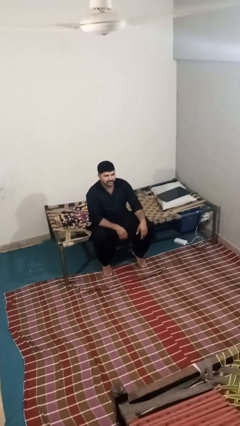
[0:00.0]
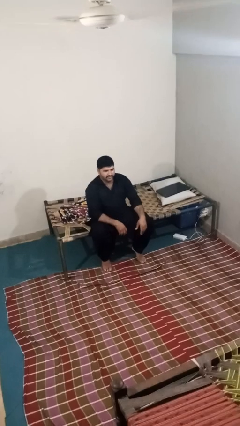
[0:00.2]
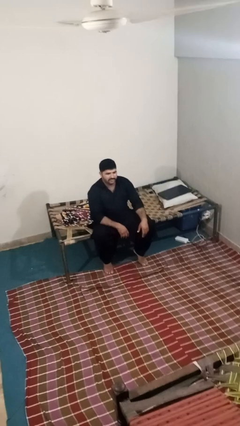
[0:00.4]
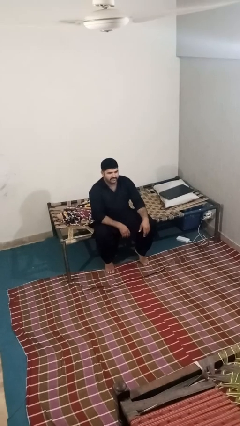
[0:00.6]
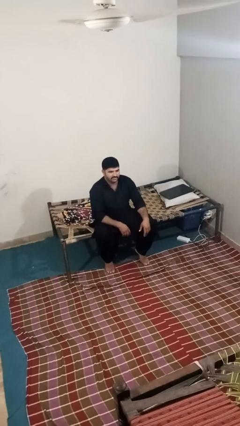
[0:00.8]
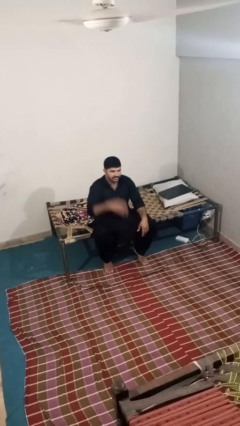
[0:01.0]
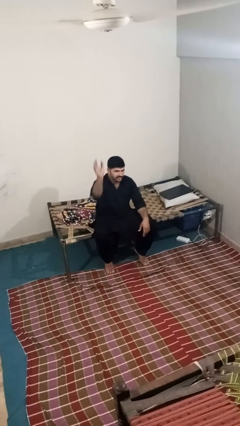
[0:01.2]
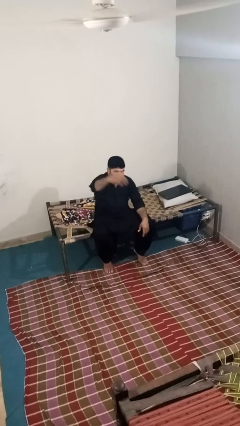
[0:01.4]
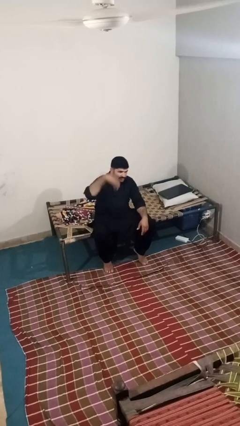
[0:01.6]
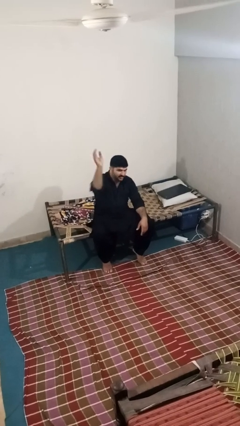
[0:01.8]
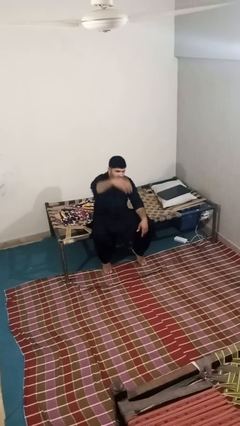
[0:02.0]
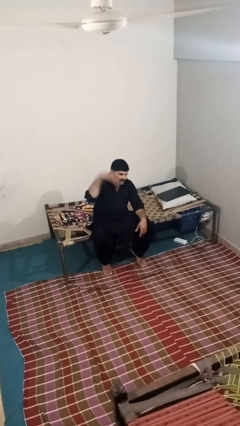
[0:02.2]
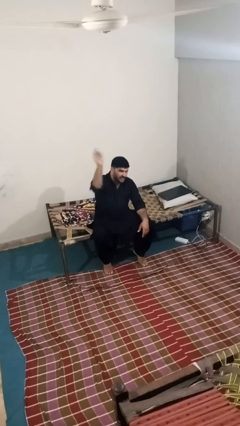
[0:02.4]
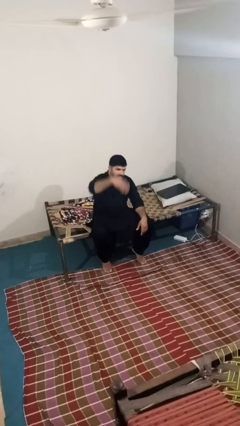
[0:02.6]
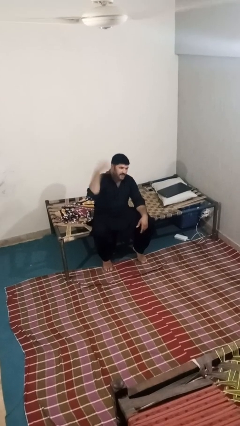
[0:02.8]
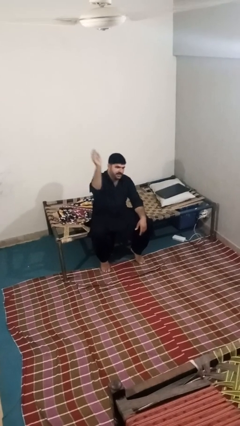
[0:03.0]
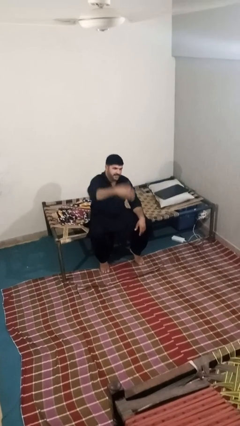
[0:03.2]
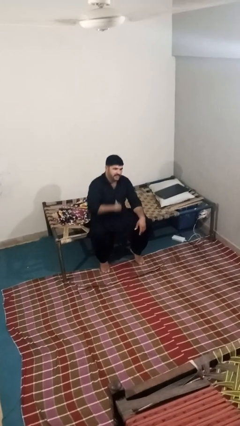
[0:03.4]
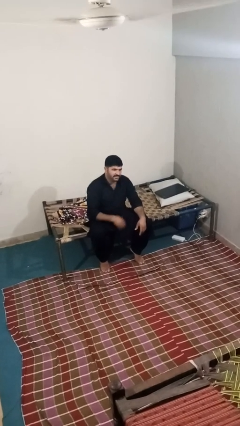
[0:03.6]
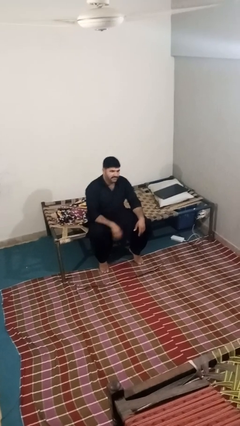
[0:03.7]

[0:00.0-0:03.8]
person gestures come here

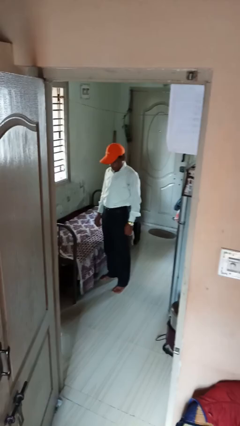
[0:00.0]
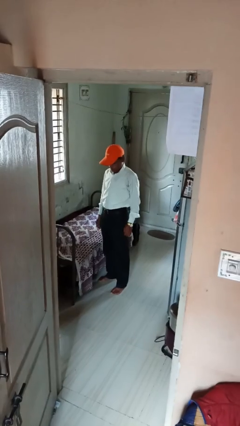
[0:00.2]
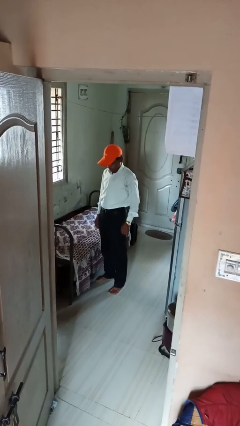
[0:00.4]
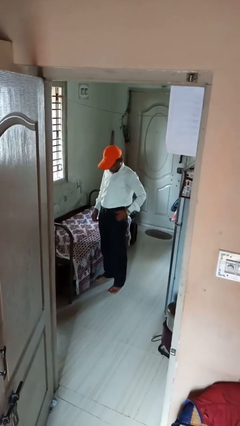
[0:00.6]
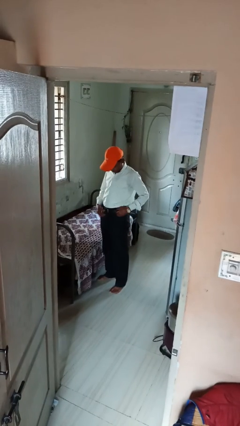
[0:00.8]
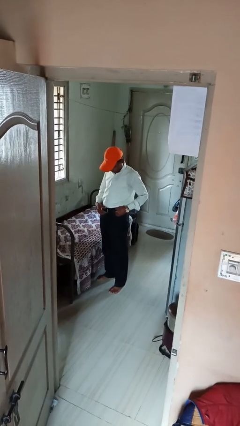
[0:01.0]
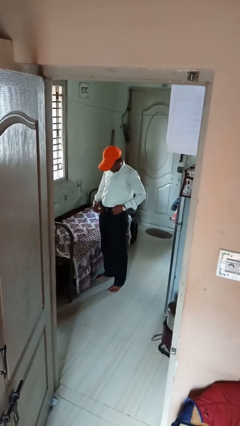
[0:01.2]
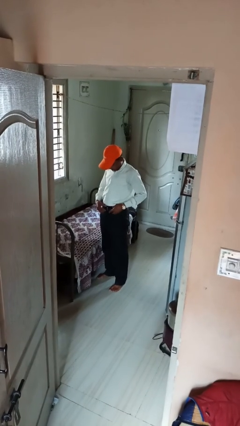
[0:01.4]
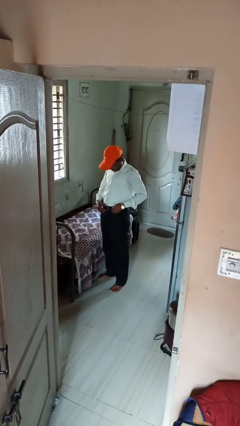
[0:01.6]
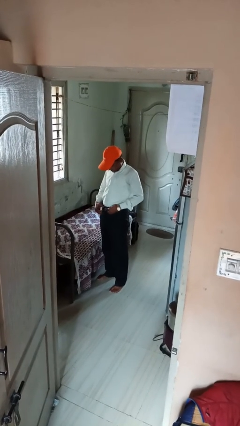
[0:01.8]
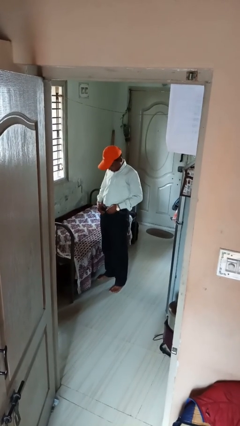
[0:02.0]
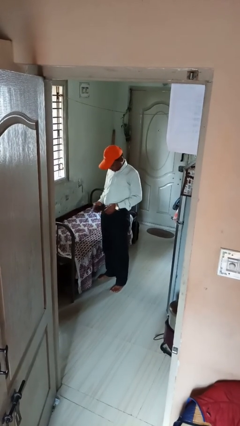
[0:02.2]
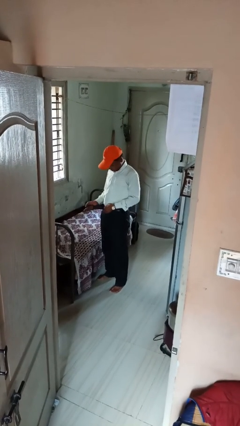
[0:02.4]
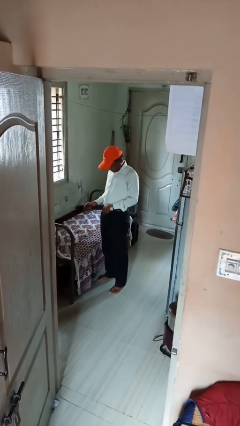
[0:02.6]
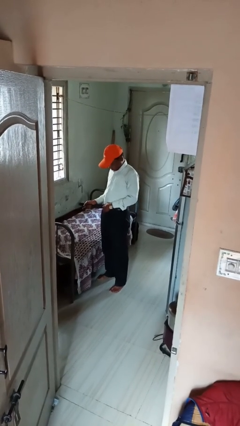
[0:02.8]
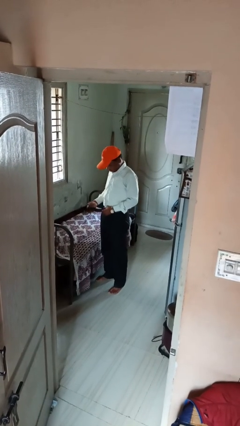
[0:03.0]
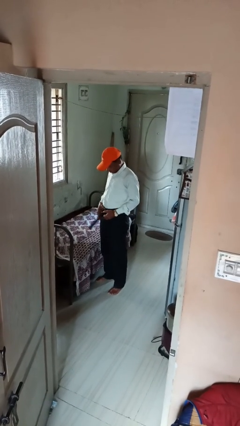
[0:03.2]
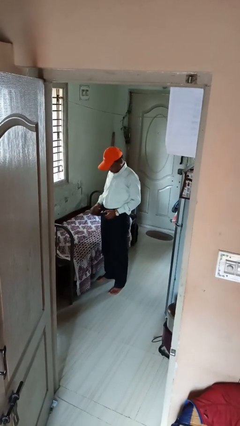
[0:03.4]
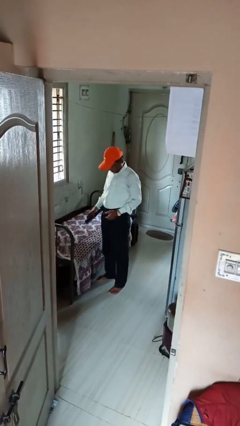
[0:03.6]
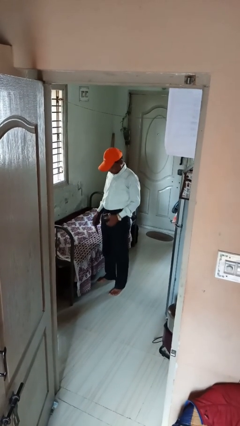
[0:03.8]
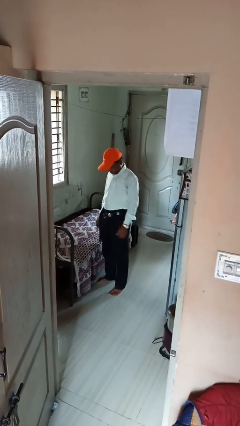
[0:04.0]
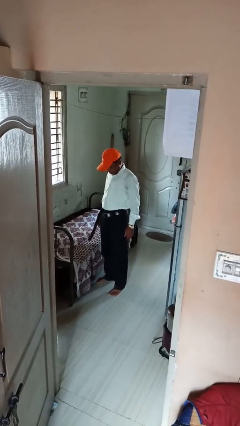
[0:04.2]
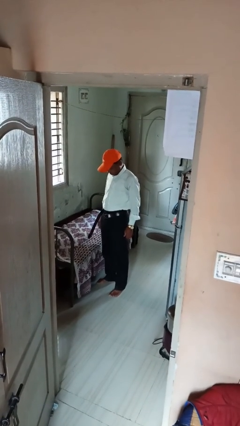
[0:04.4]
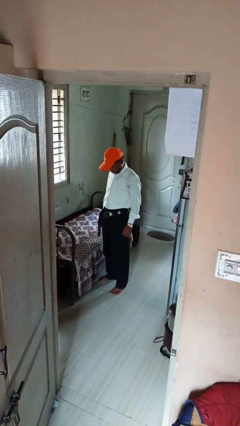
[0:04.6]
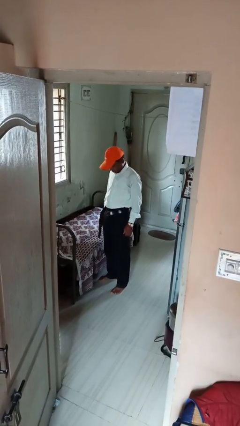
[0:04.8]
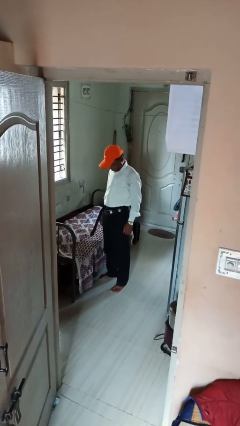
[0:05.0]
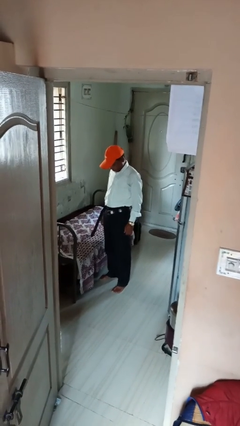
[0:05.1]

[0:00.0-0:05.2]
person takes off belt

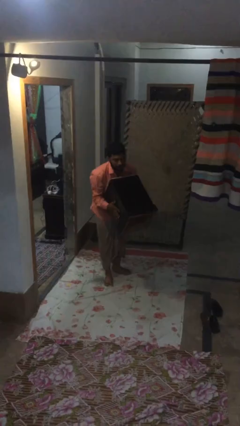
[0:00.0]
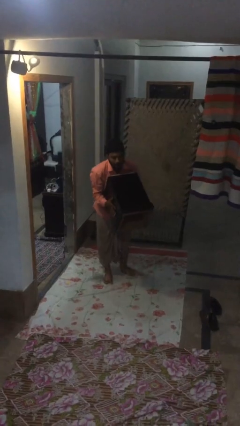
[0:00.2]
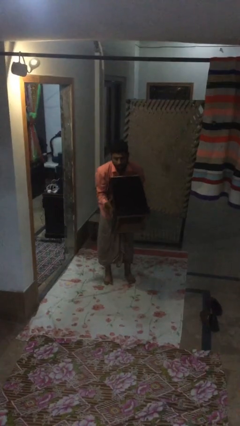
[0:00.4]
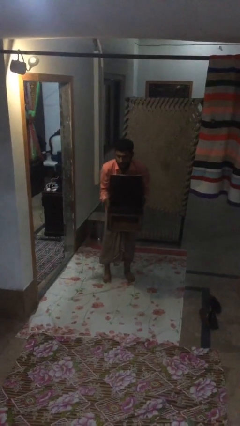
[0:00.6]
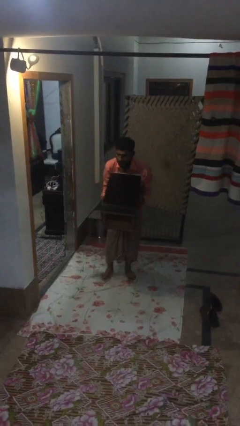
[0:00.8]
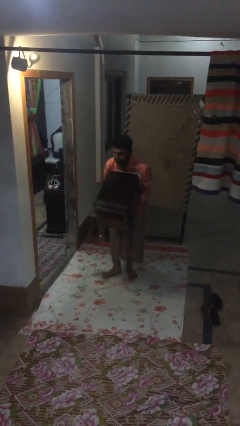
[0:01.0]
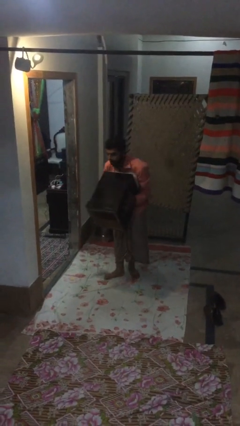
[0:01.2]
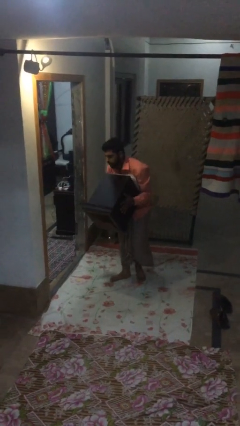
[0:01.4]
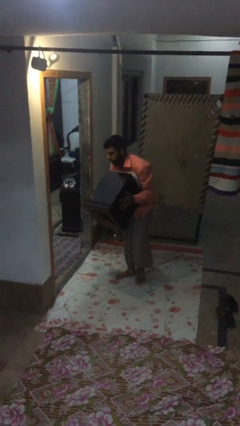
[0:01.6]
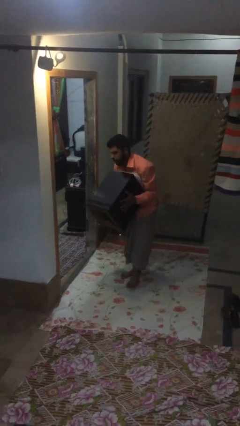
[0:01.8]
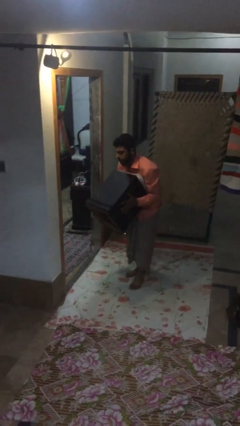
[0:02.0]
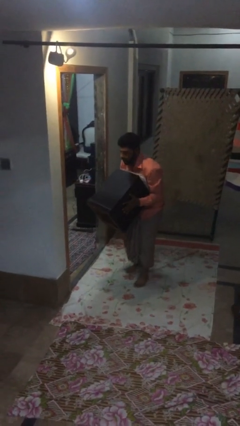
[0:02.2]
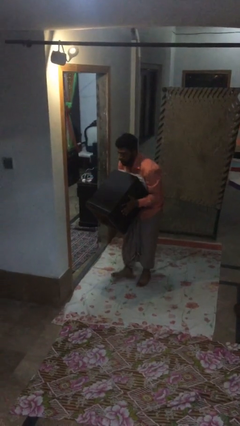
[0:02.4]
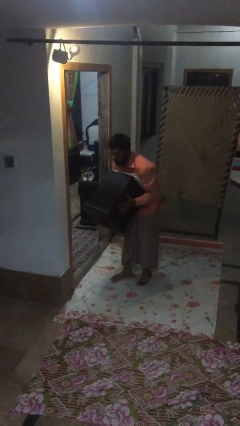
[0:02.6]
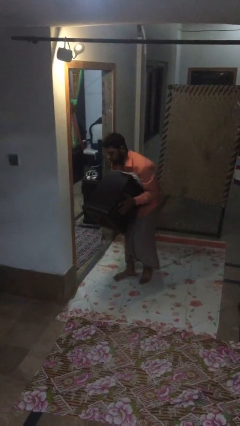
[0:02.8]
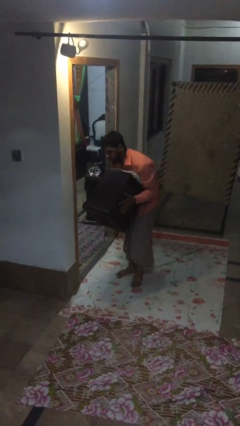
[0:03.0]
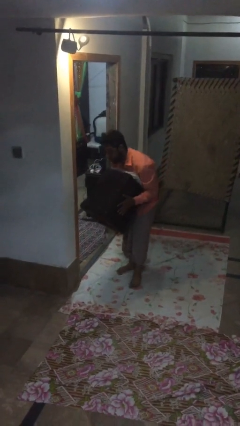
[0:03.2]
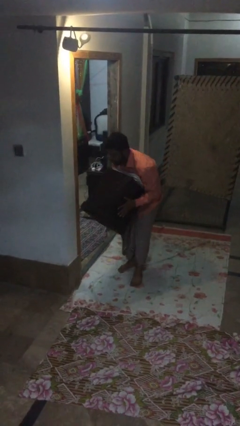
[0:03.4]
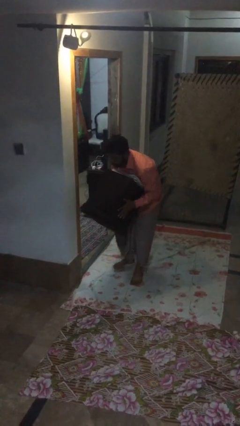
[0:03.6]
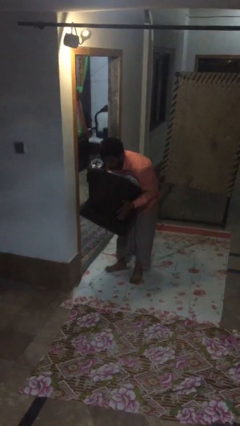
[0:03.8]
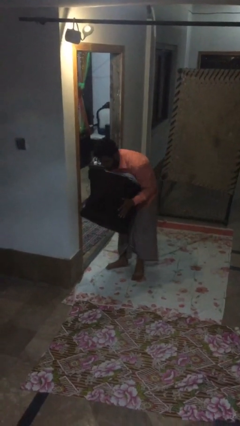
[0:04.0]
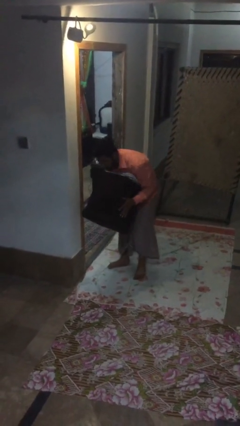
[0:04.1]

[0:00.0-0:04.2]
person carries heavy object

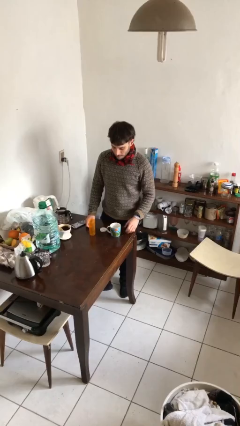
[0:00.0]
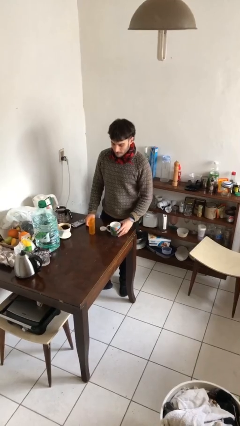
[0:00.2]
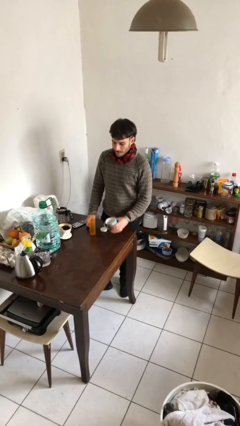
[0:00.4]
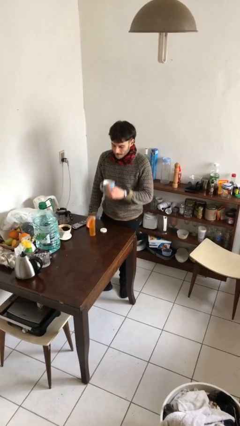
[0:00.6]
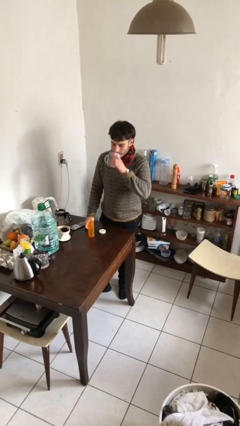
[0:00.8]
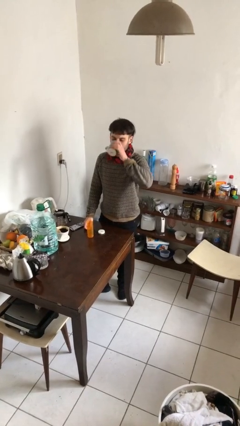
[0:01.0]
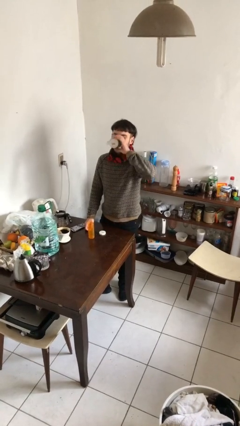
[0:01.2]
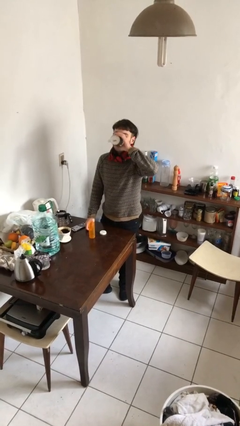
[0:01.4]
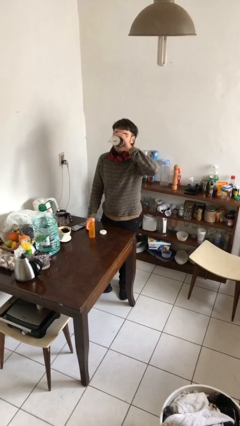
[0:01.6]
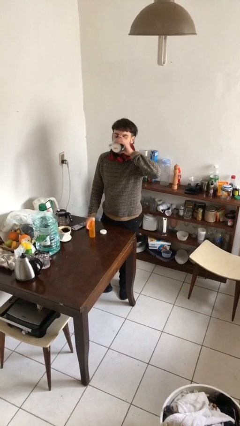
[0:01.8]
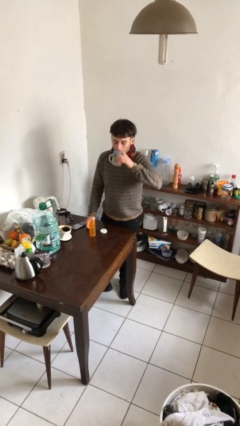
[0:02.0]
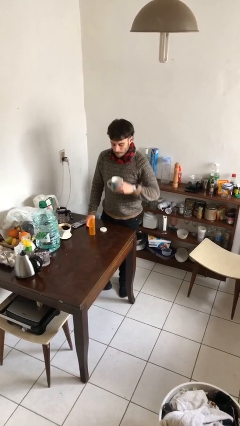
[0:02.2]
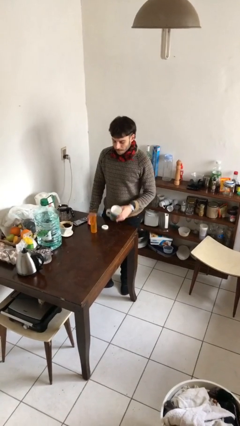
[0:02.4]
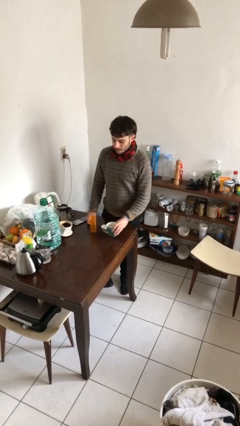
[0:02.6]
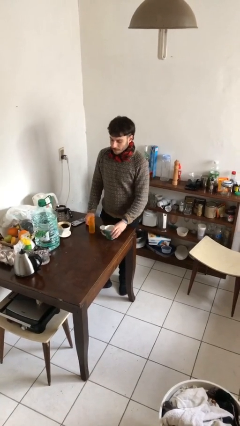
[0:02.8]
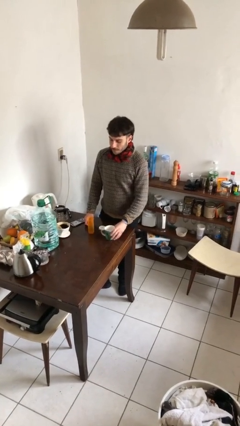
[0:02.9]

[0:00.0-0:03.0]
person drinks from cup

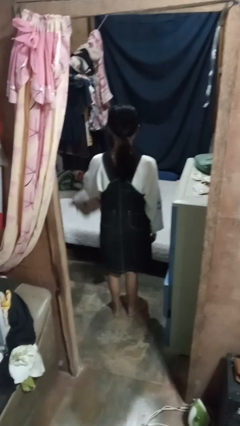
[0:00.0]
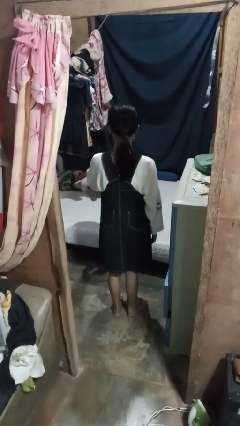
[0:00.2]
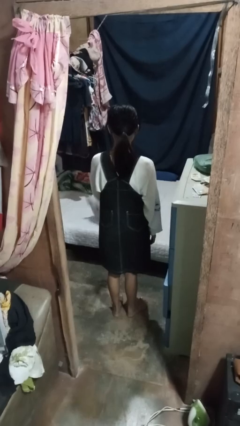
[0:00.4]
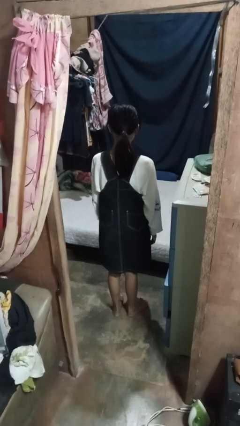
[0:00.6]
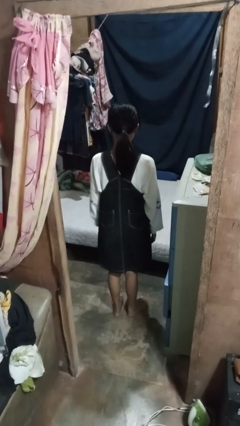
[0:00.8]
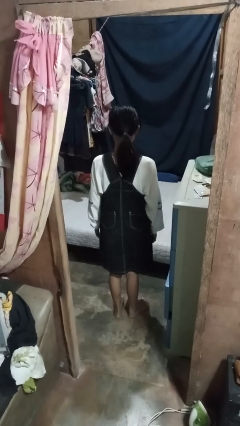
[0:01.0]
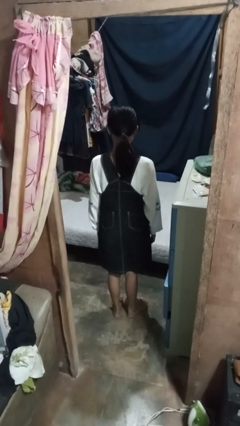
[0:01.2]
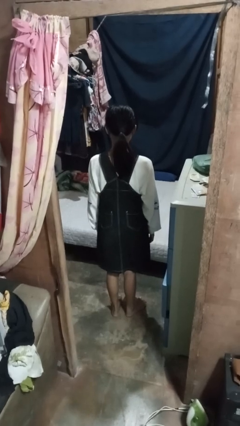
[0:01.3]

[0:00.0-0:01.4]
person throws object on bed
